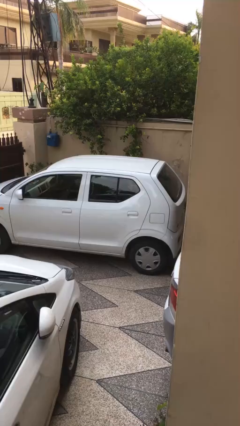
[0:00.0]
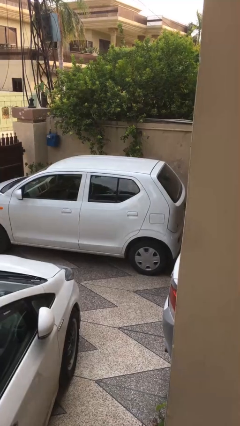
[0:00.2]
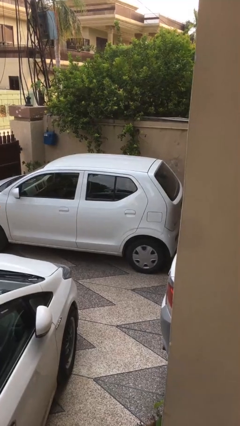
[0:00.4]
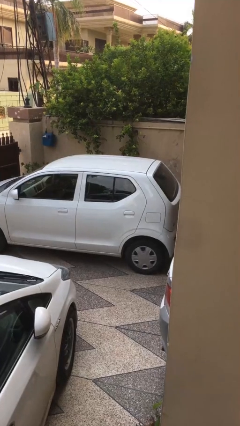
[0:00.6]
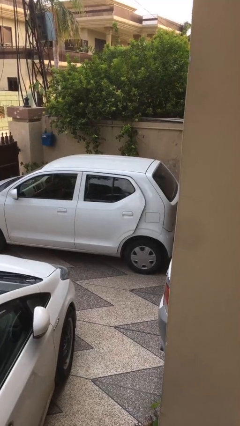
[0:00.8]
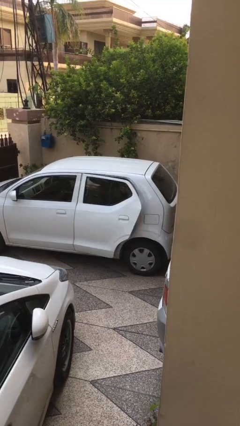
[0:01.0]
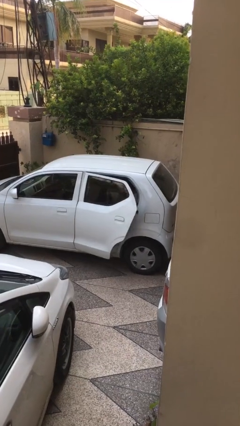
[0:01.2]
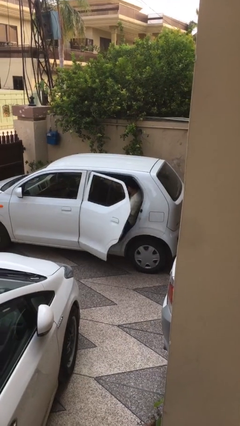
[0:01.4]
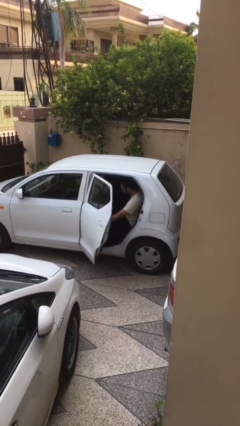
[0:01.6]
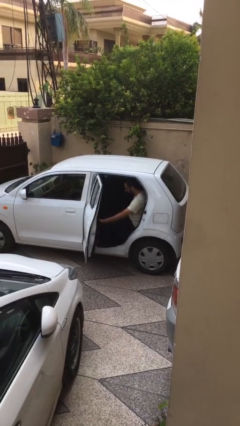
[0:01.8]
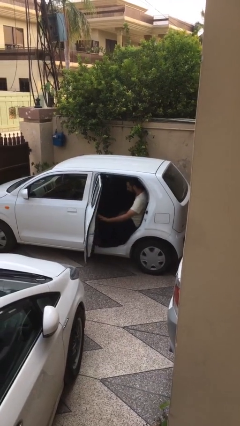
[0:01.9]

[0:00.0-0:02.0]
person opens car door

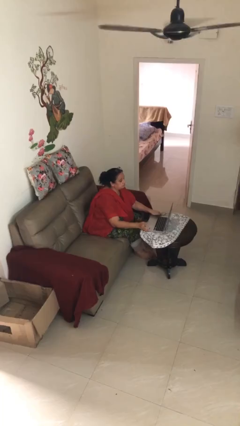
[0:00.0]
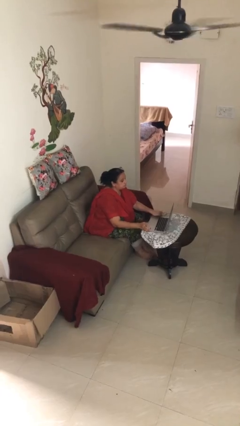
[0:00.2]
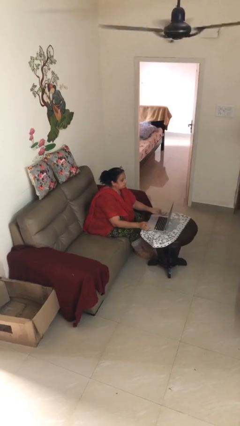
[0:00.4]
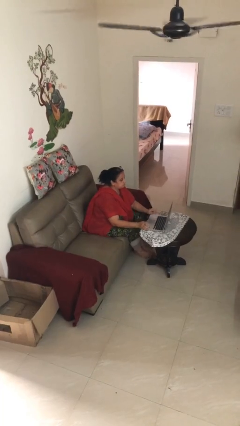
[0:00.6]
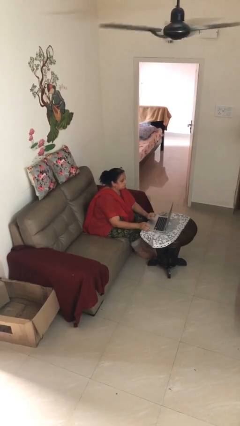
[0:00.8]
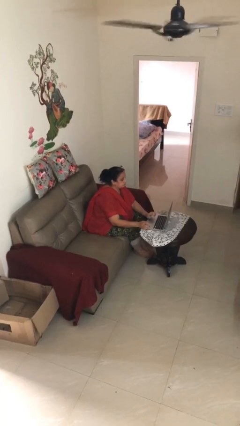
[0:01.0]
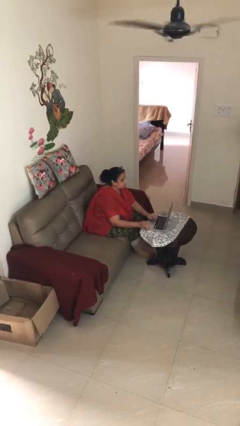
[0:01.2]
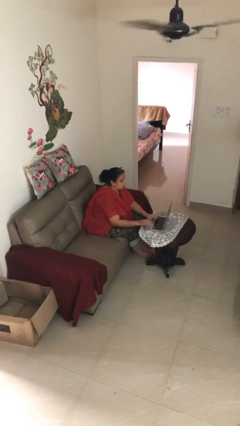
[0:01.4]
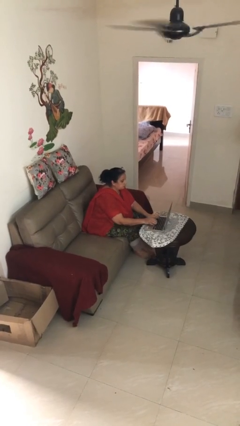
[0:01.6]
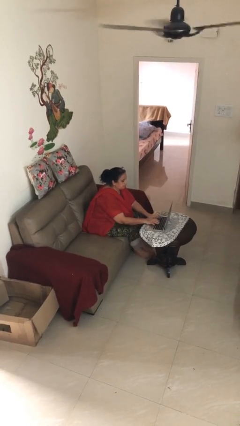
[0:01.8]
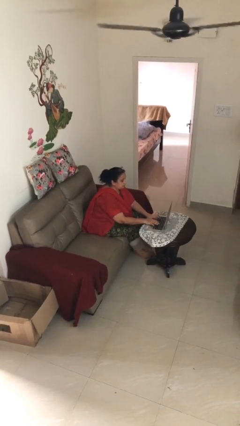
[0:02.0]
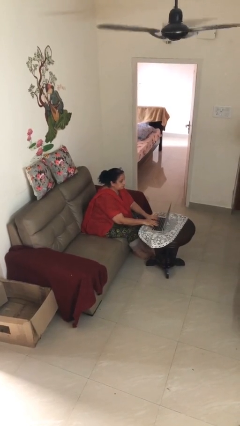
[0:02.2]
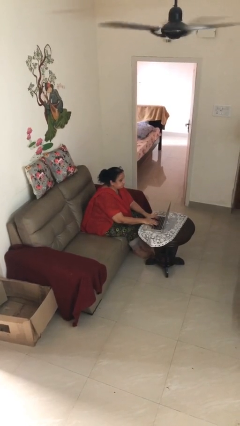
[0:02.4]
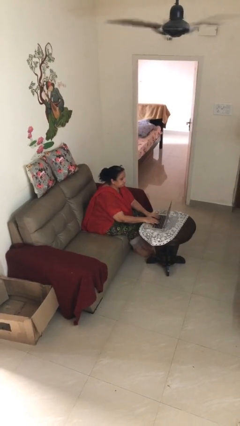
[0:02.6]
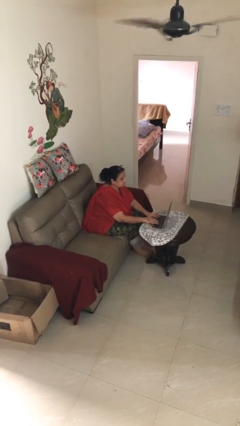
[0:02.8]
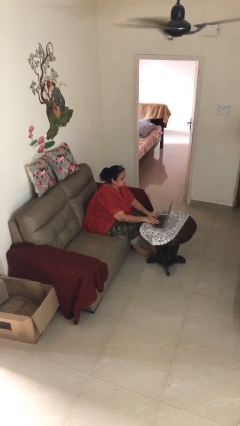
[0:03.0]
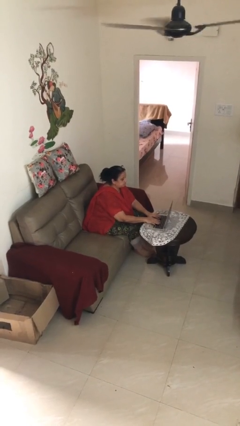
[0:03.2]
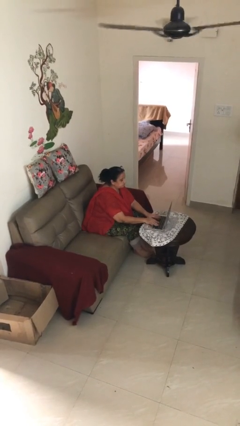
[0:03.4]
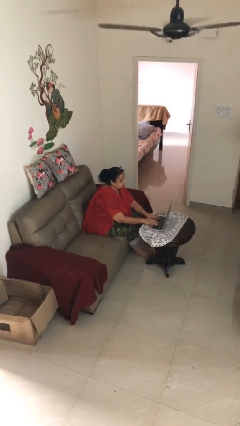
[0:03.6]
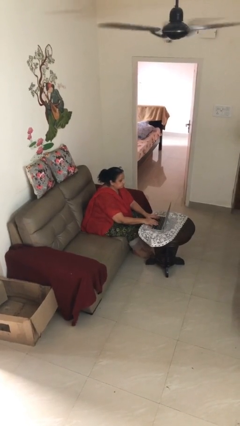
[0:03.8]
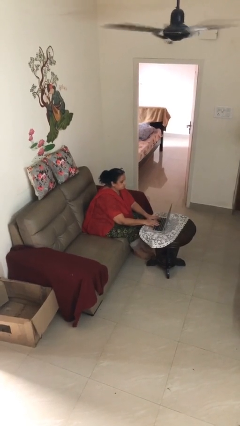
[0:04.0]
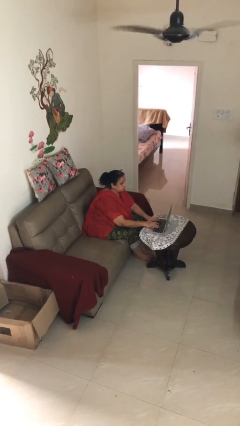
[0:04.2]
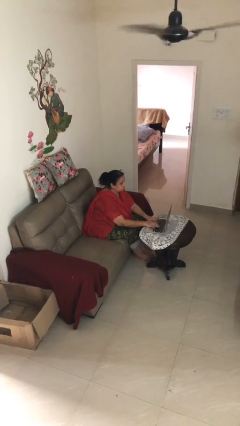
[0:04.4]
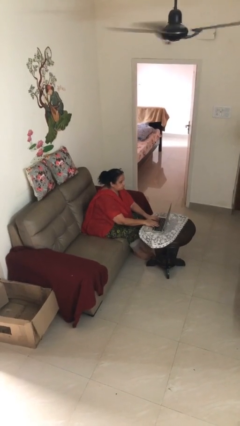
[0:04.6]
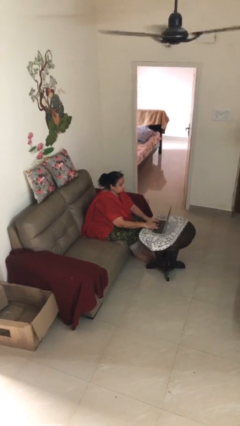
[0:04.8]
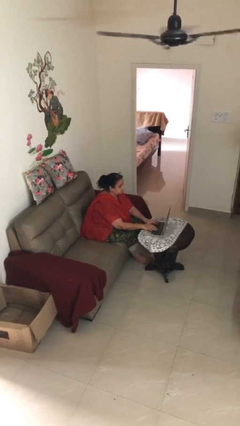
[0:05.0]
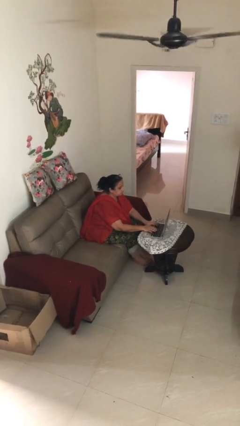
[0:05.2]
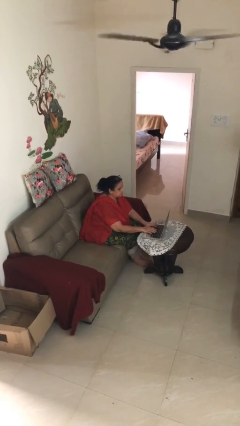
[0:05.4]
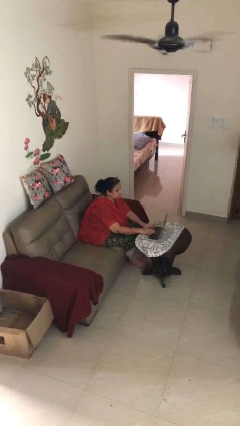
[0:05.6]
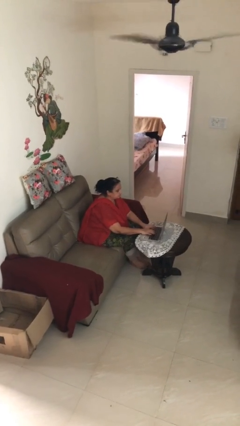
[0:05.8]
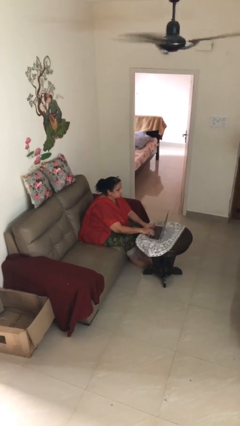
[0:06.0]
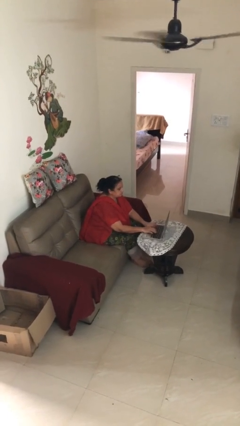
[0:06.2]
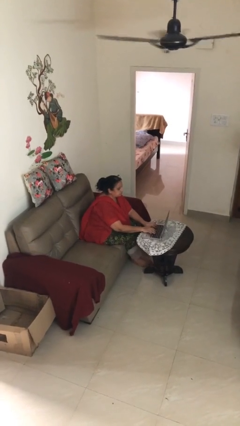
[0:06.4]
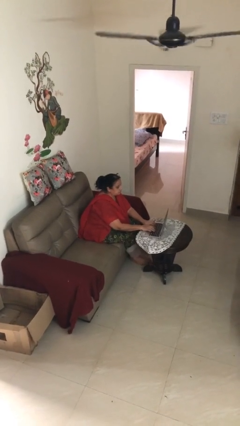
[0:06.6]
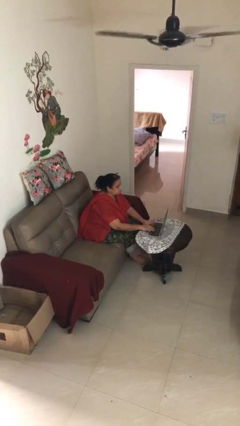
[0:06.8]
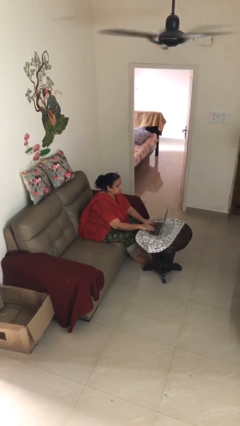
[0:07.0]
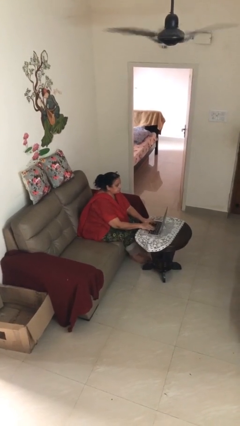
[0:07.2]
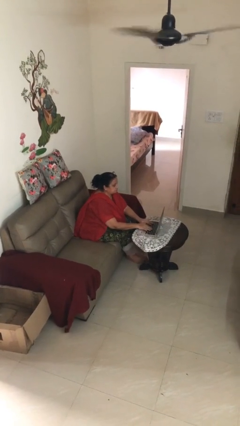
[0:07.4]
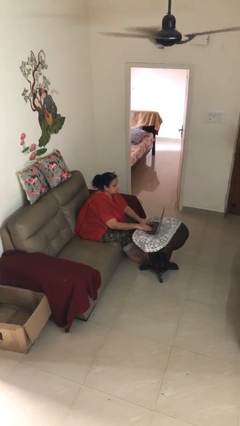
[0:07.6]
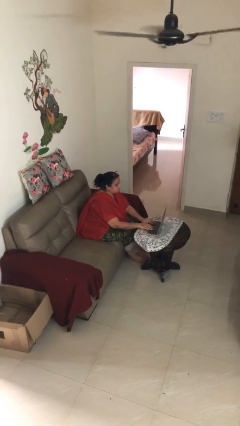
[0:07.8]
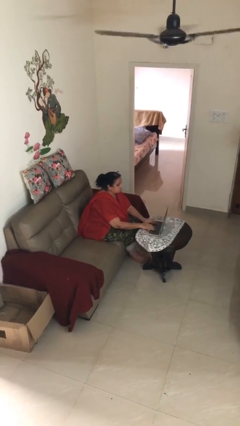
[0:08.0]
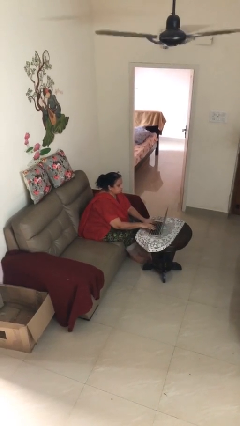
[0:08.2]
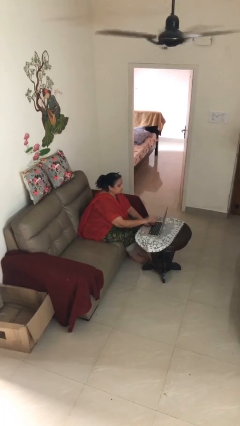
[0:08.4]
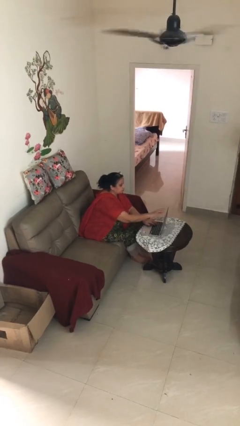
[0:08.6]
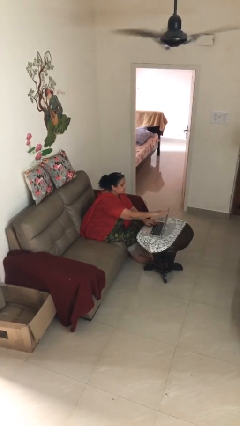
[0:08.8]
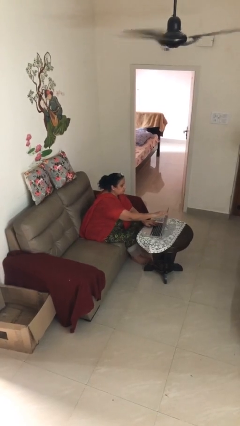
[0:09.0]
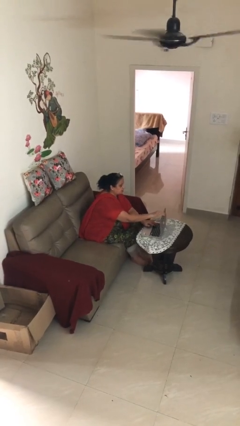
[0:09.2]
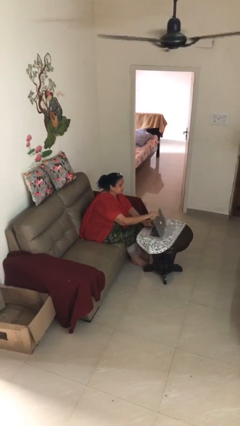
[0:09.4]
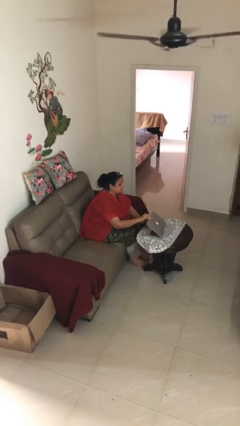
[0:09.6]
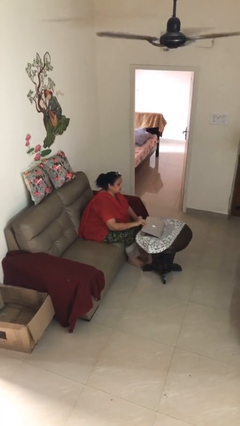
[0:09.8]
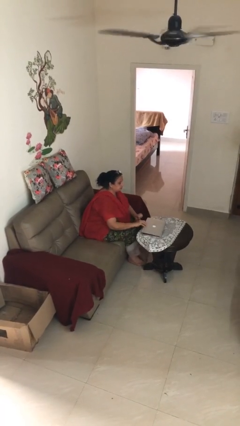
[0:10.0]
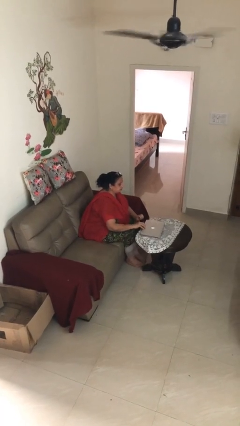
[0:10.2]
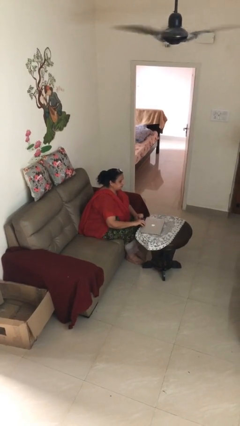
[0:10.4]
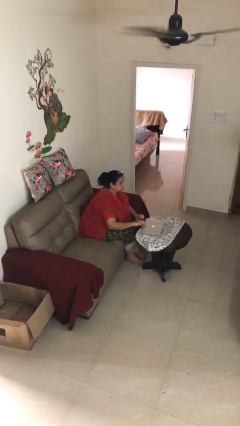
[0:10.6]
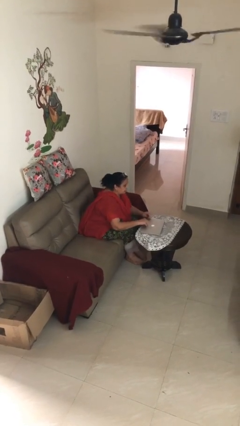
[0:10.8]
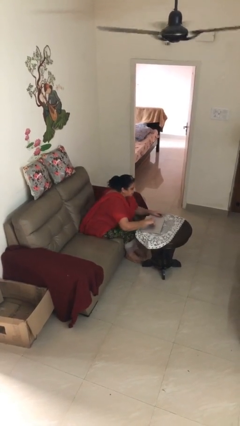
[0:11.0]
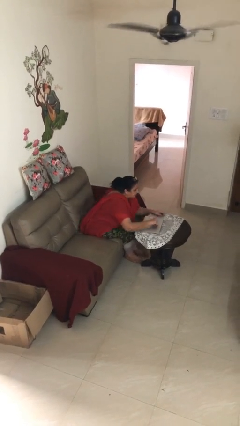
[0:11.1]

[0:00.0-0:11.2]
person interacts with laptop

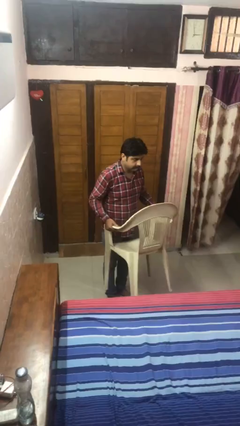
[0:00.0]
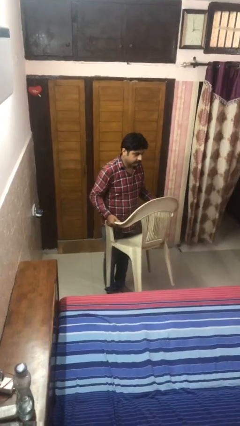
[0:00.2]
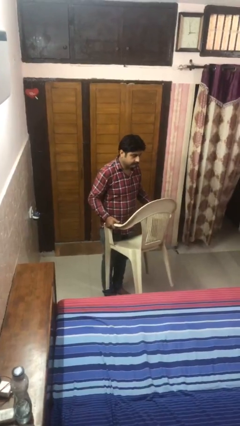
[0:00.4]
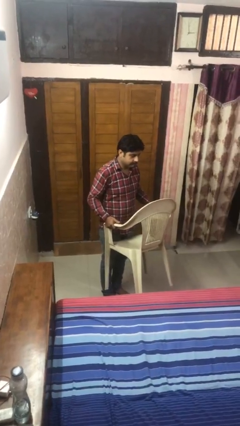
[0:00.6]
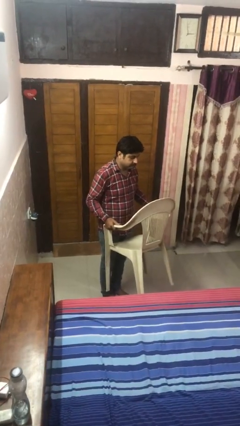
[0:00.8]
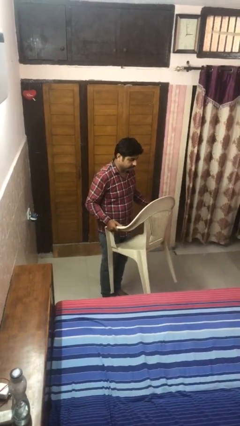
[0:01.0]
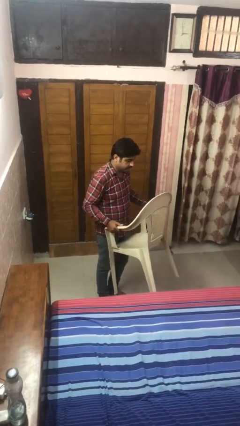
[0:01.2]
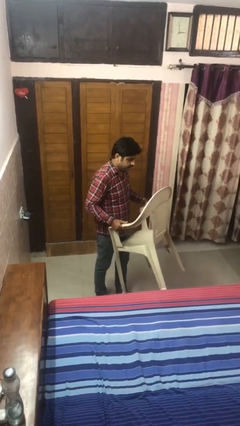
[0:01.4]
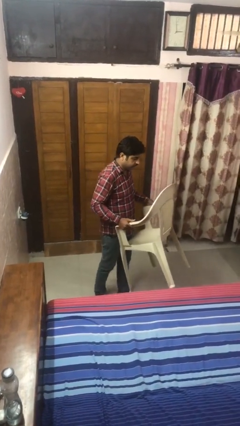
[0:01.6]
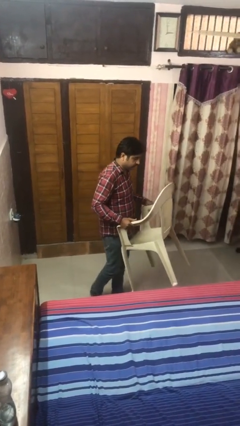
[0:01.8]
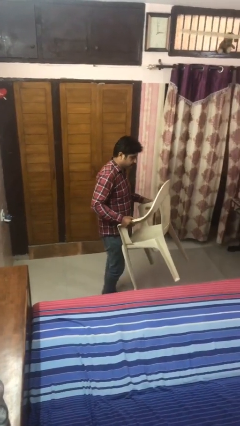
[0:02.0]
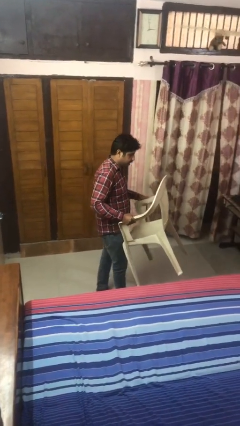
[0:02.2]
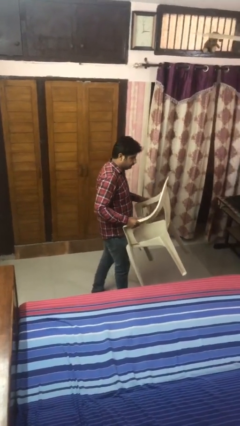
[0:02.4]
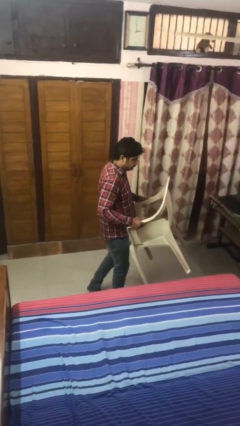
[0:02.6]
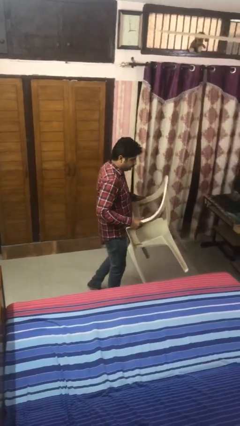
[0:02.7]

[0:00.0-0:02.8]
person carries furniture

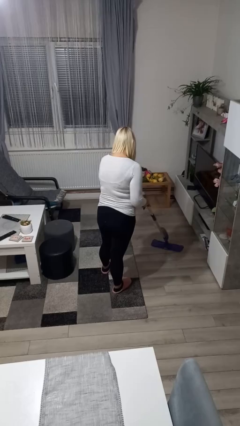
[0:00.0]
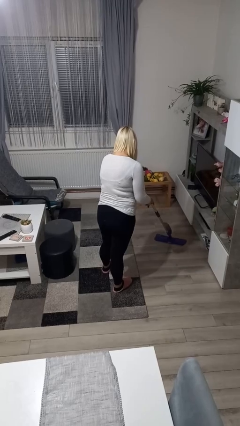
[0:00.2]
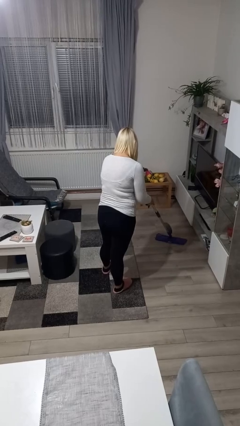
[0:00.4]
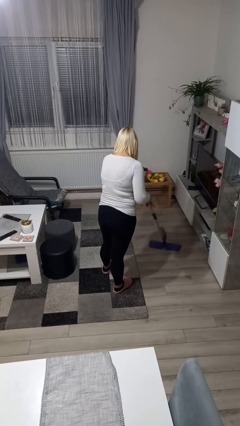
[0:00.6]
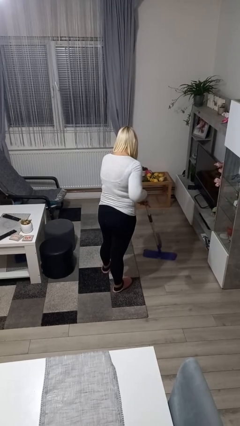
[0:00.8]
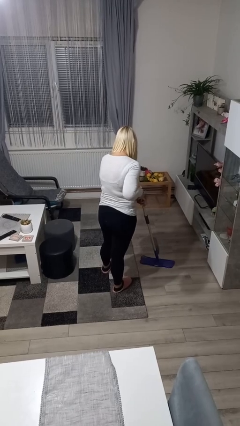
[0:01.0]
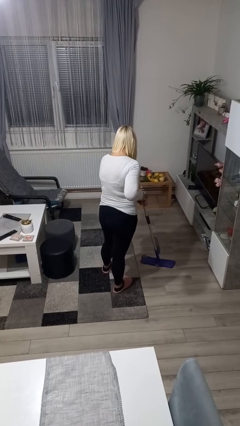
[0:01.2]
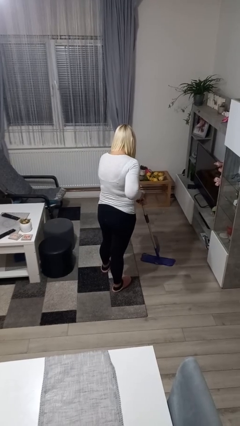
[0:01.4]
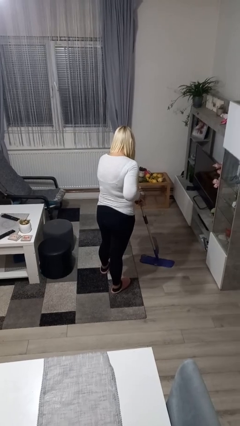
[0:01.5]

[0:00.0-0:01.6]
person mops

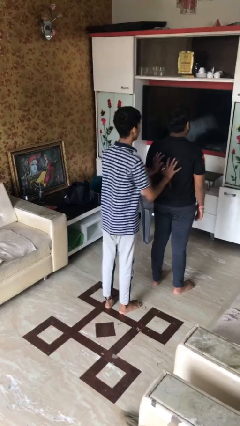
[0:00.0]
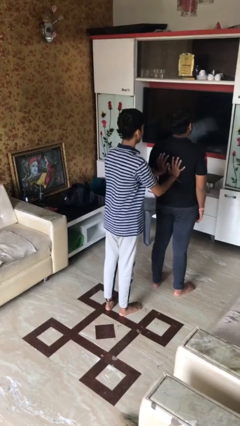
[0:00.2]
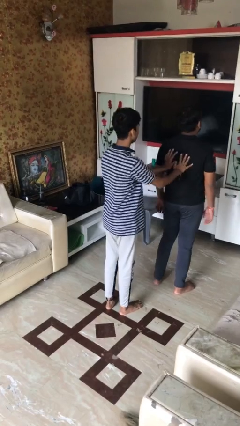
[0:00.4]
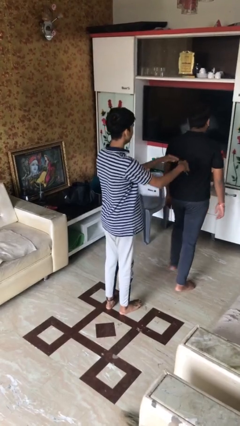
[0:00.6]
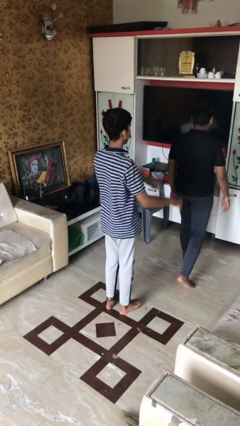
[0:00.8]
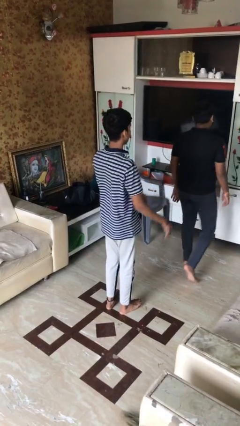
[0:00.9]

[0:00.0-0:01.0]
person shoves person
